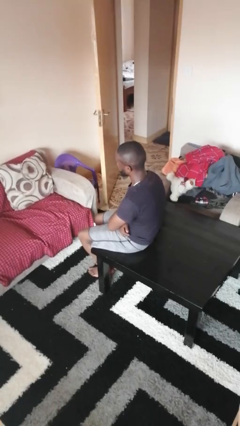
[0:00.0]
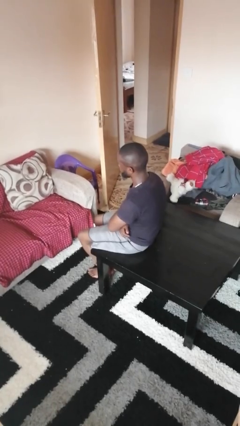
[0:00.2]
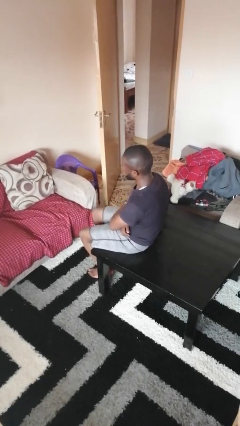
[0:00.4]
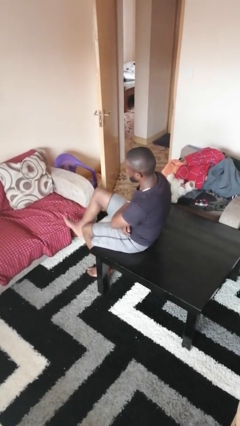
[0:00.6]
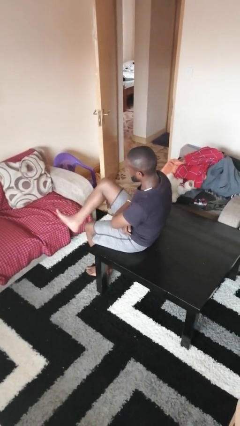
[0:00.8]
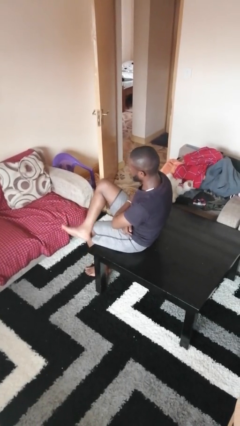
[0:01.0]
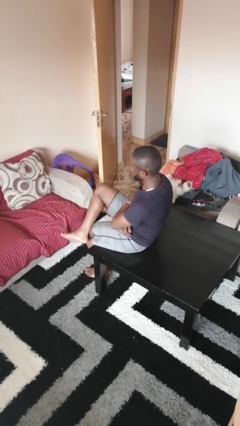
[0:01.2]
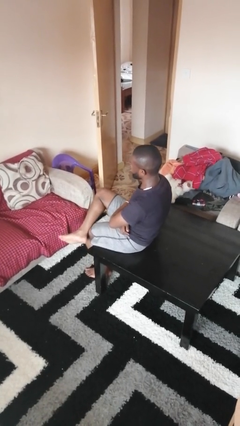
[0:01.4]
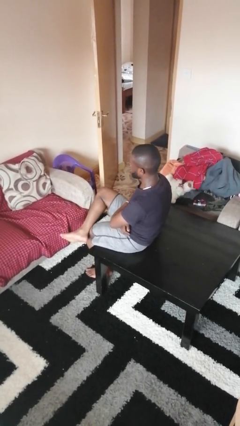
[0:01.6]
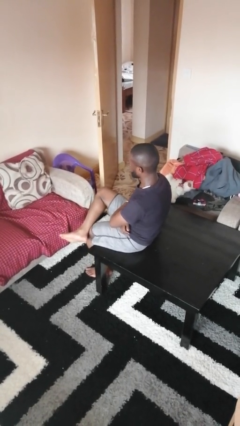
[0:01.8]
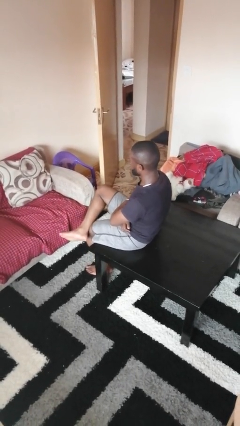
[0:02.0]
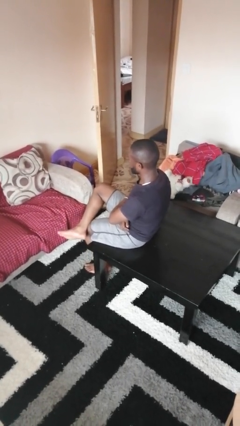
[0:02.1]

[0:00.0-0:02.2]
person crosses legs

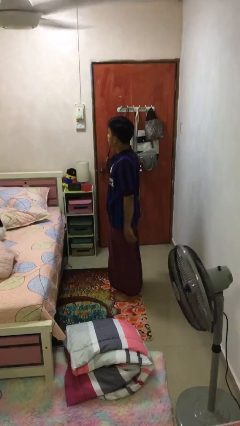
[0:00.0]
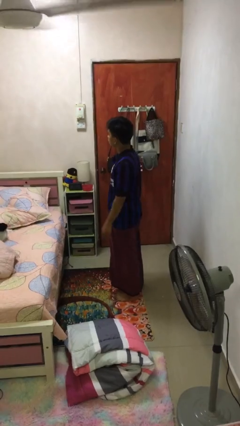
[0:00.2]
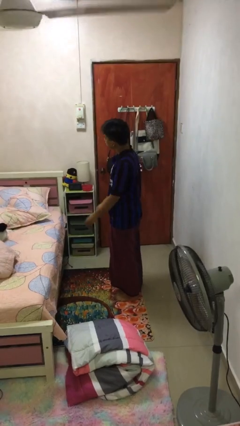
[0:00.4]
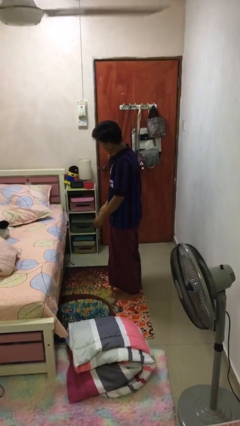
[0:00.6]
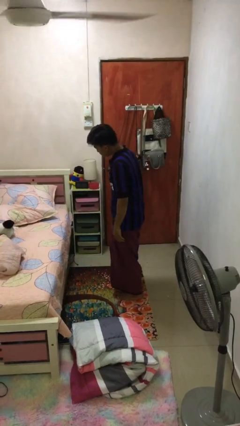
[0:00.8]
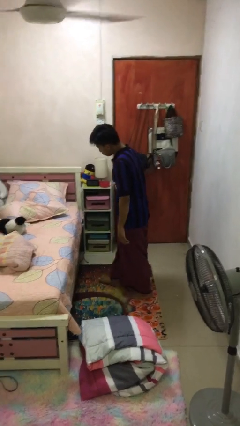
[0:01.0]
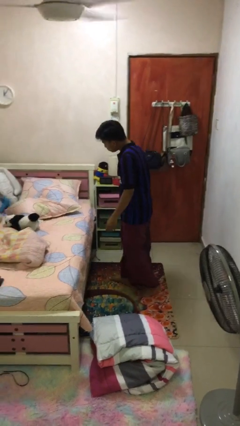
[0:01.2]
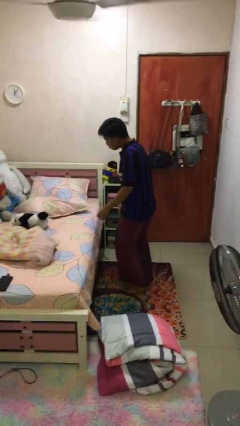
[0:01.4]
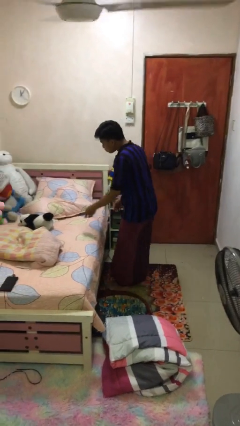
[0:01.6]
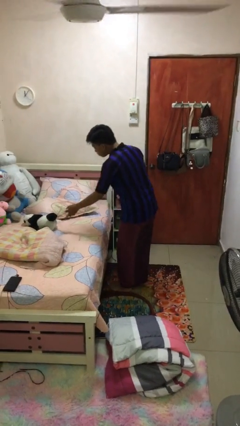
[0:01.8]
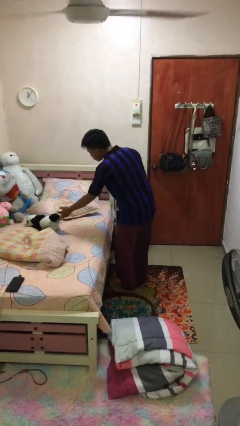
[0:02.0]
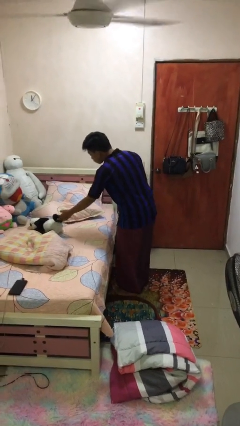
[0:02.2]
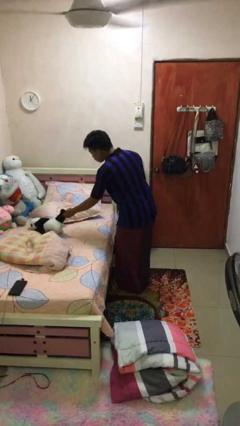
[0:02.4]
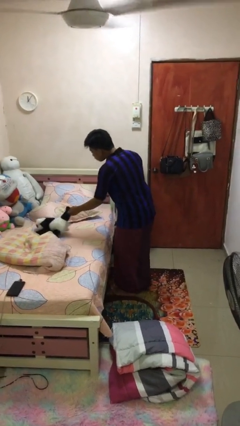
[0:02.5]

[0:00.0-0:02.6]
person picks up object from bed

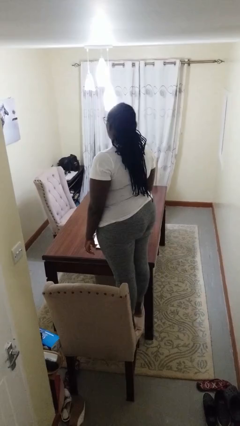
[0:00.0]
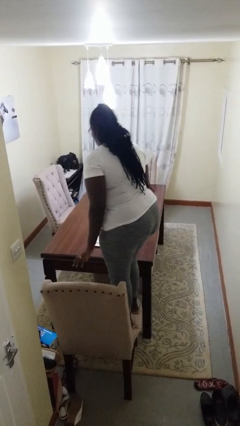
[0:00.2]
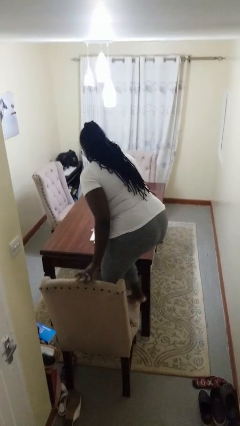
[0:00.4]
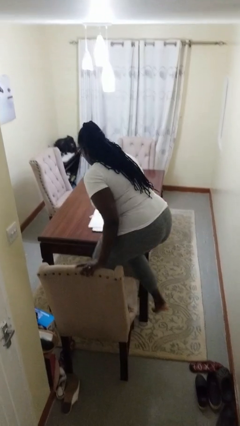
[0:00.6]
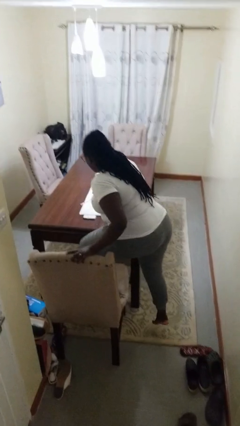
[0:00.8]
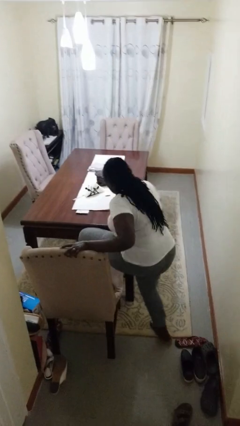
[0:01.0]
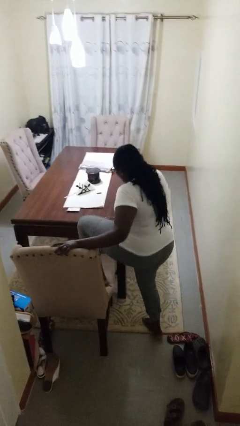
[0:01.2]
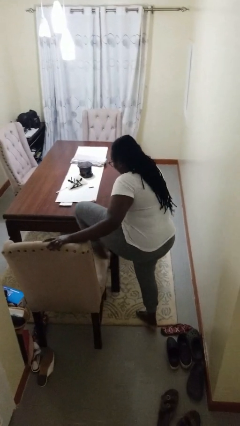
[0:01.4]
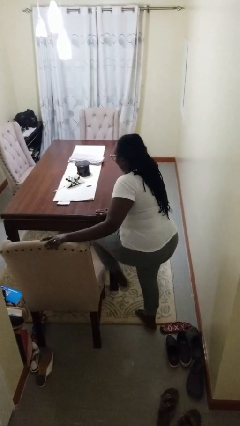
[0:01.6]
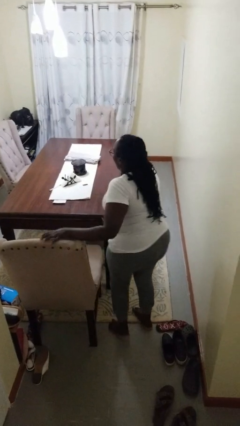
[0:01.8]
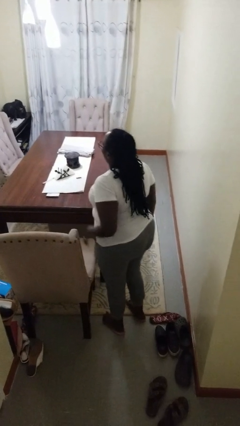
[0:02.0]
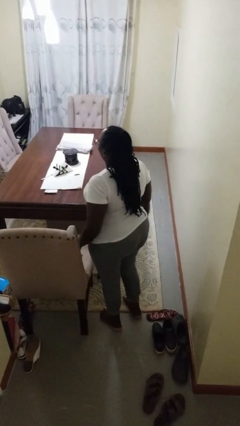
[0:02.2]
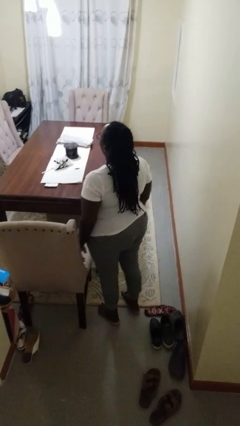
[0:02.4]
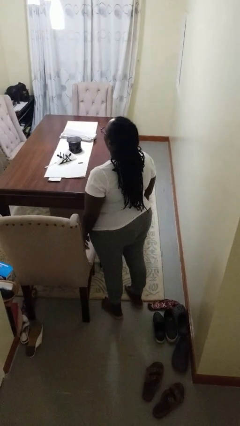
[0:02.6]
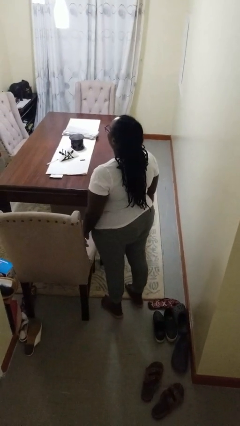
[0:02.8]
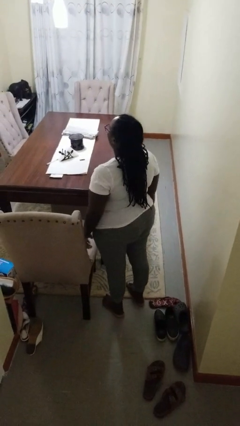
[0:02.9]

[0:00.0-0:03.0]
person climbs off chair

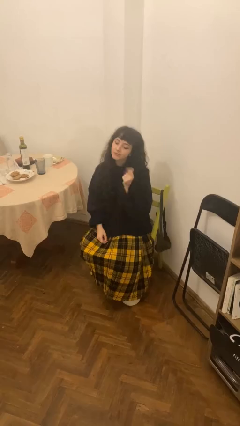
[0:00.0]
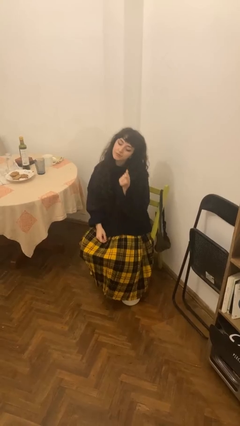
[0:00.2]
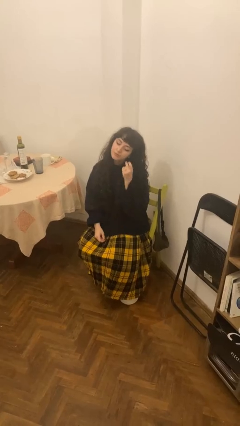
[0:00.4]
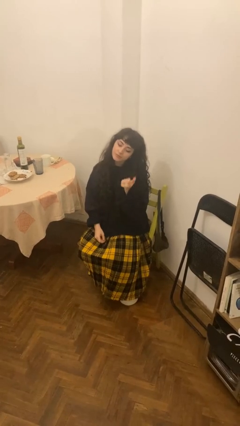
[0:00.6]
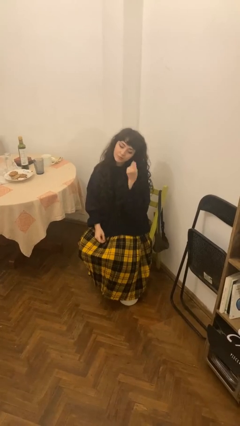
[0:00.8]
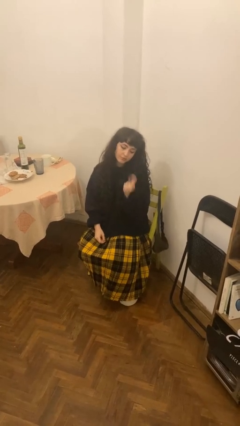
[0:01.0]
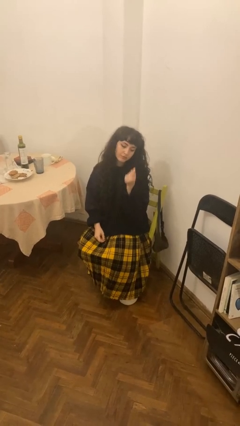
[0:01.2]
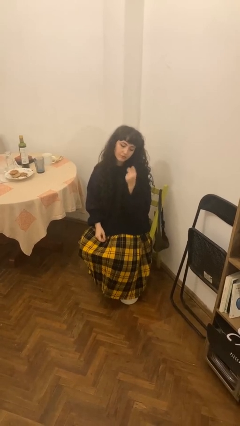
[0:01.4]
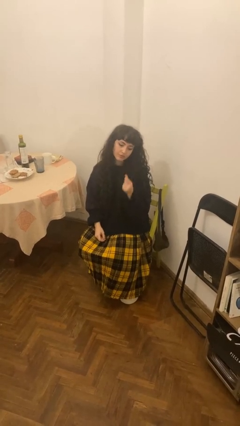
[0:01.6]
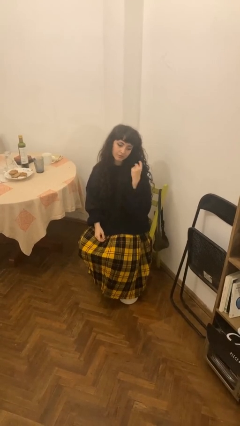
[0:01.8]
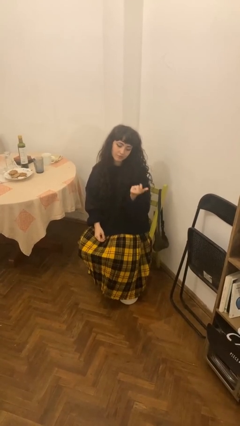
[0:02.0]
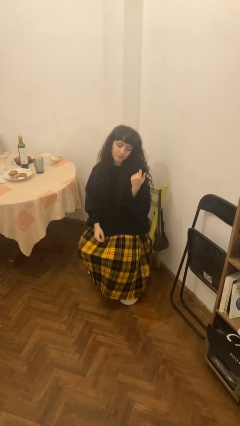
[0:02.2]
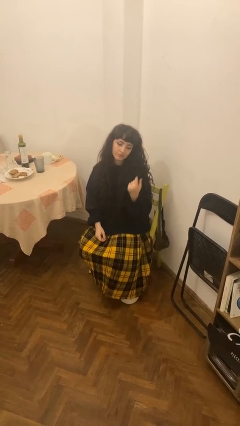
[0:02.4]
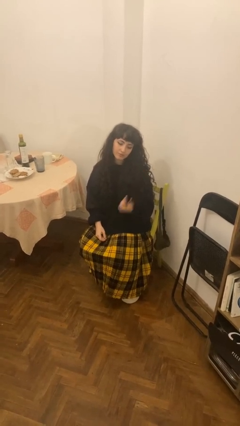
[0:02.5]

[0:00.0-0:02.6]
person snaps fingers

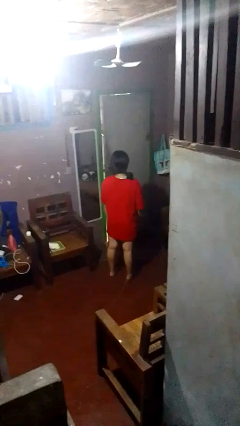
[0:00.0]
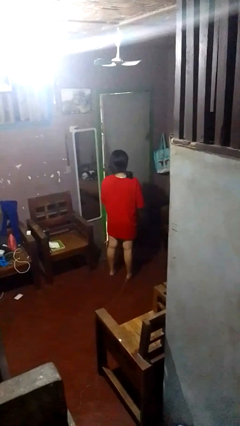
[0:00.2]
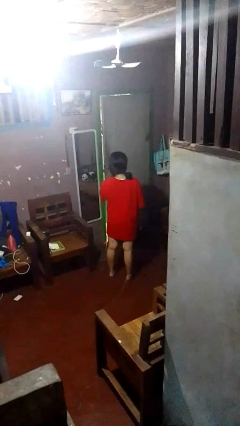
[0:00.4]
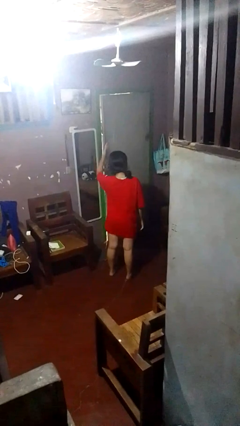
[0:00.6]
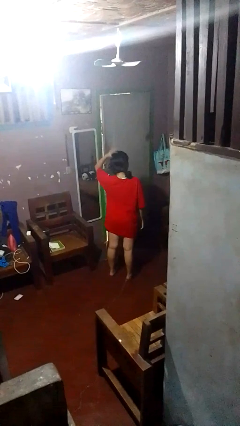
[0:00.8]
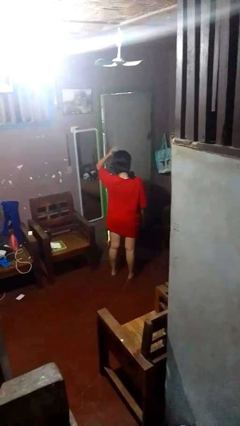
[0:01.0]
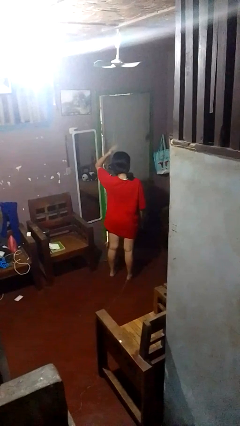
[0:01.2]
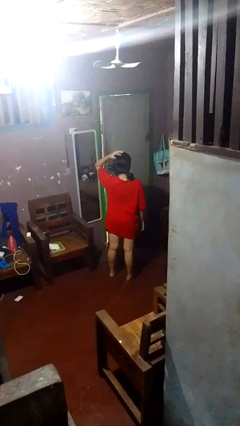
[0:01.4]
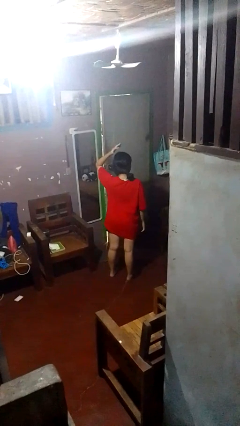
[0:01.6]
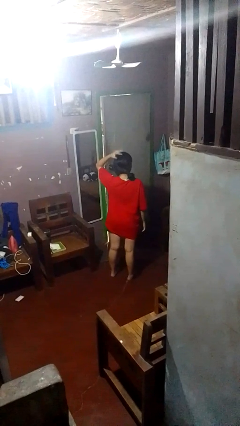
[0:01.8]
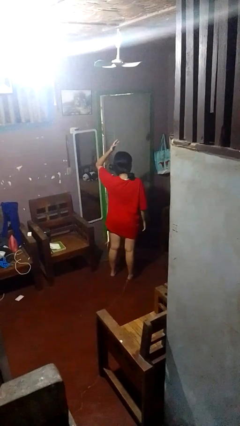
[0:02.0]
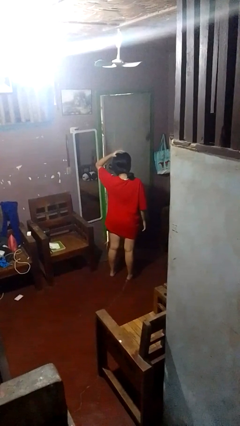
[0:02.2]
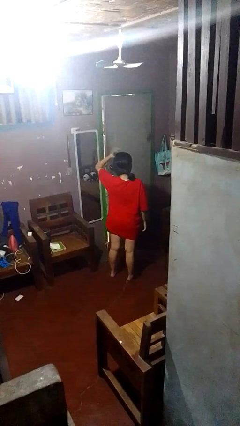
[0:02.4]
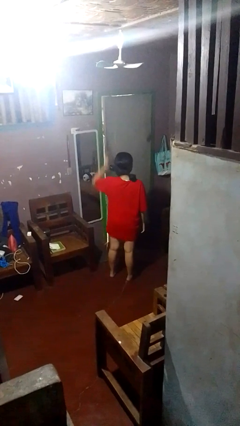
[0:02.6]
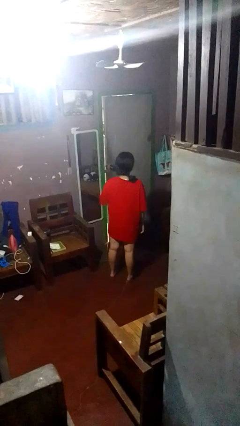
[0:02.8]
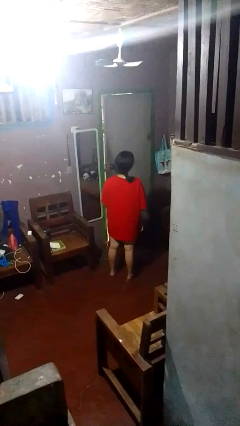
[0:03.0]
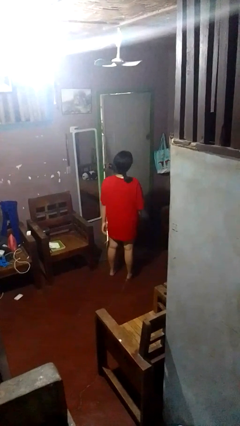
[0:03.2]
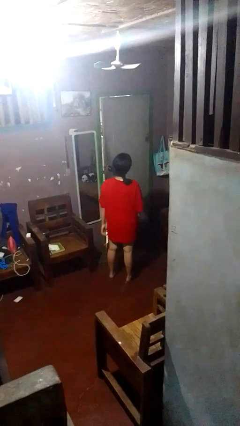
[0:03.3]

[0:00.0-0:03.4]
person pats head

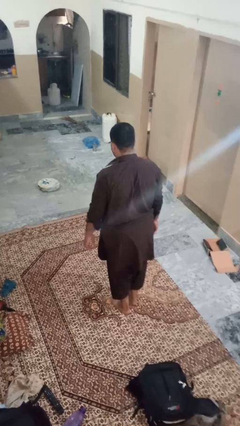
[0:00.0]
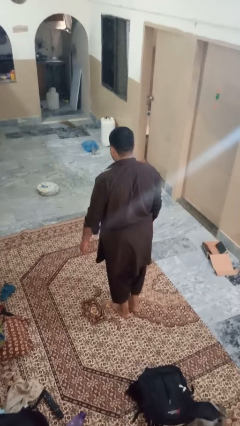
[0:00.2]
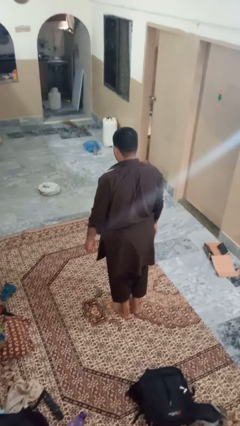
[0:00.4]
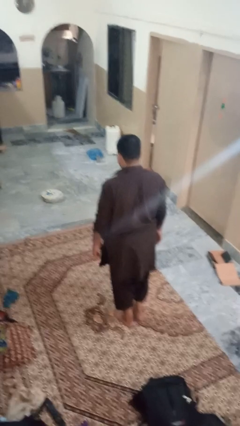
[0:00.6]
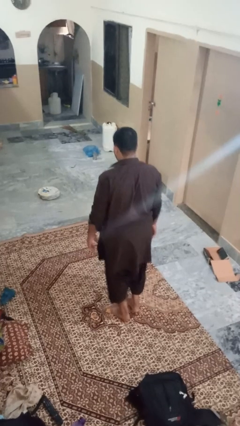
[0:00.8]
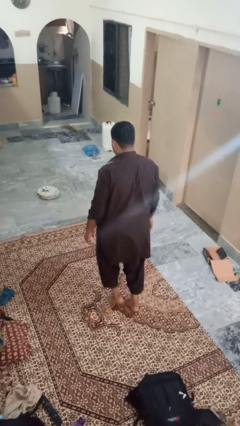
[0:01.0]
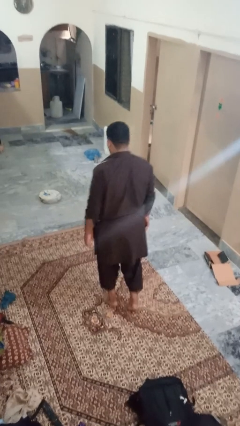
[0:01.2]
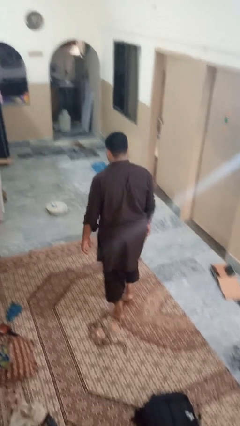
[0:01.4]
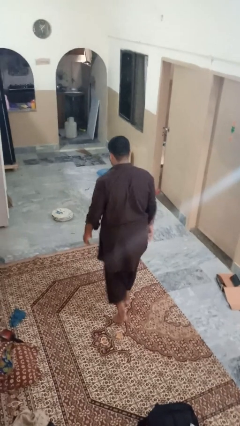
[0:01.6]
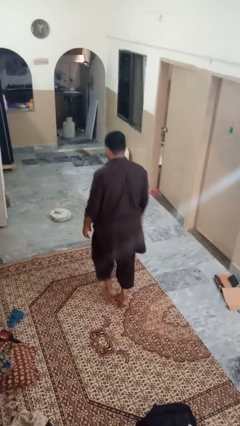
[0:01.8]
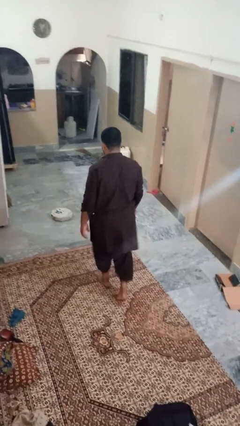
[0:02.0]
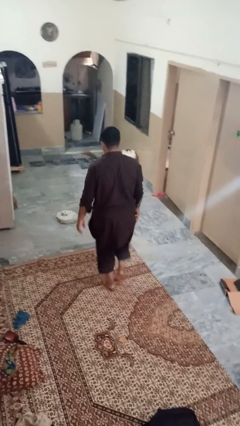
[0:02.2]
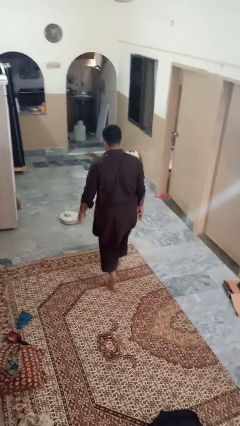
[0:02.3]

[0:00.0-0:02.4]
person walks tiptoe

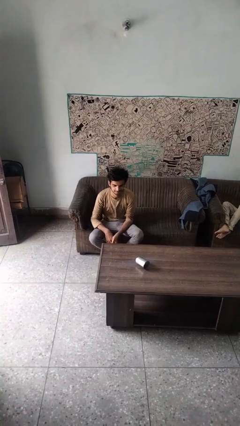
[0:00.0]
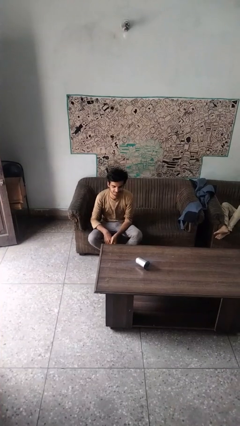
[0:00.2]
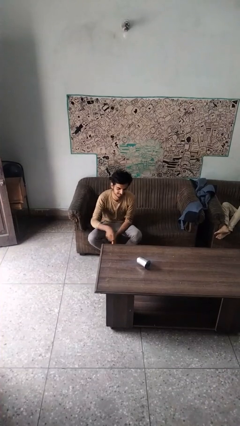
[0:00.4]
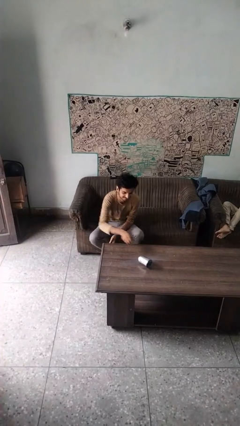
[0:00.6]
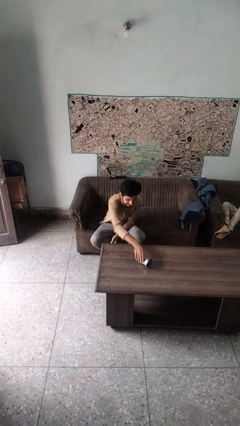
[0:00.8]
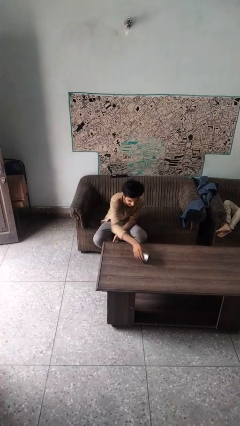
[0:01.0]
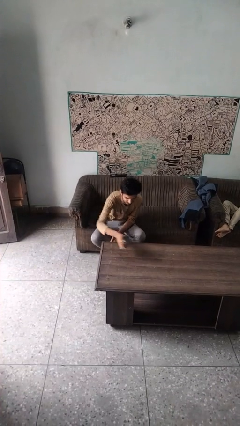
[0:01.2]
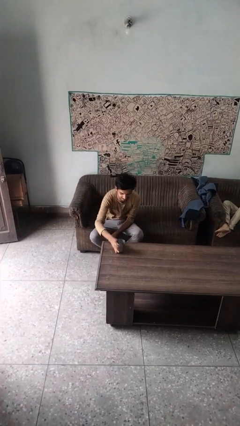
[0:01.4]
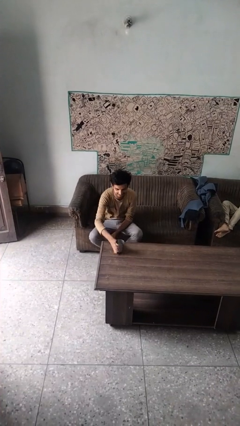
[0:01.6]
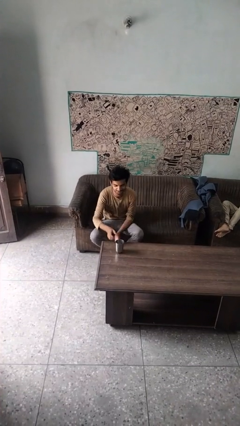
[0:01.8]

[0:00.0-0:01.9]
person sets upright glass
